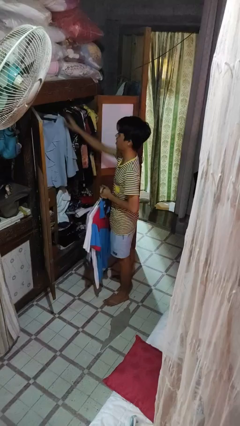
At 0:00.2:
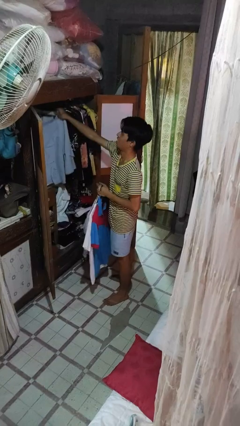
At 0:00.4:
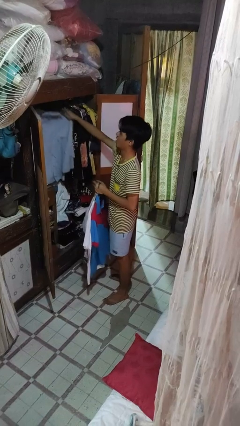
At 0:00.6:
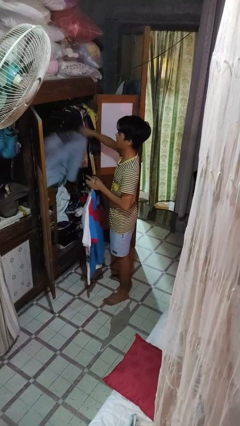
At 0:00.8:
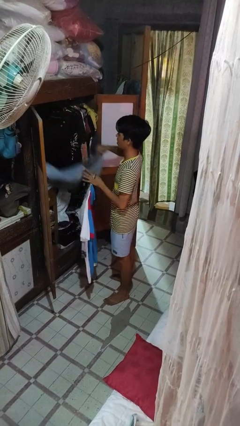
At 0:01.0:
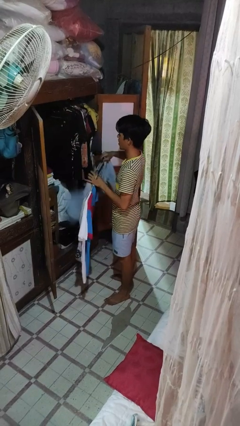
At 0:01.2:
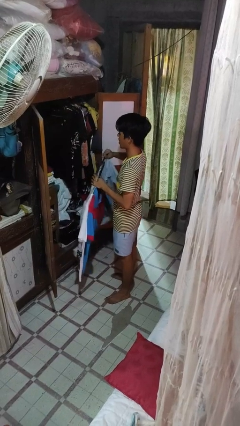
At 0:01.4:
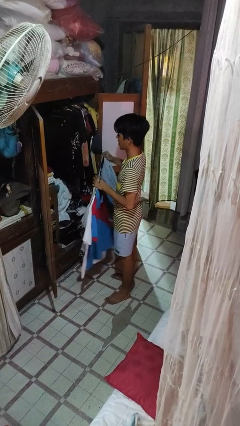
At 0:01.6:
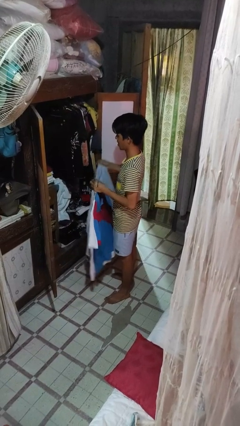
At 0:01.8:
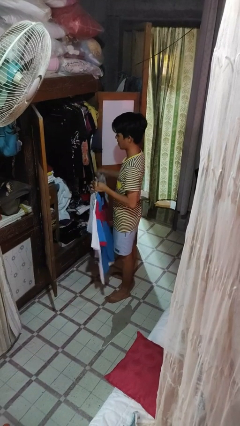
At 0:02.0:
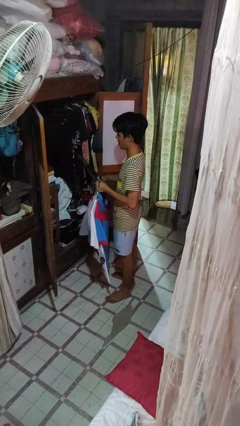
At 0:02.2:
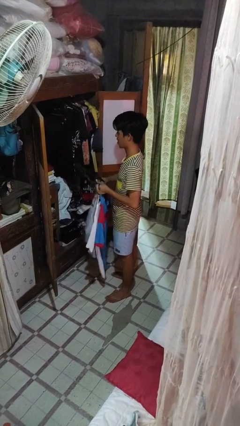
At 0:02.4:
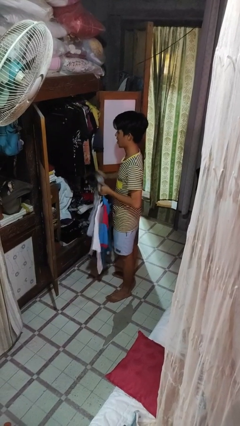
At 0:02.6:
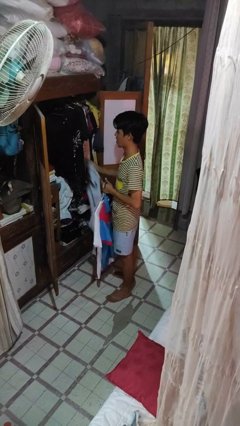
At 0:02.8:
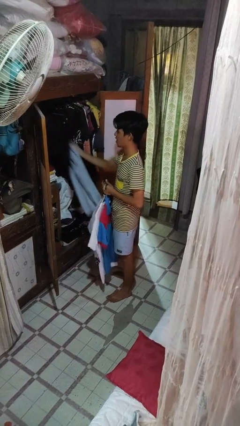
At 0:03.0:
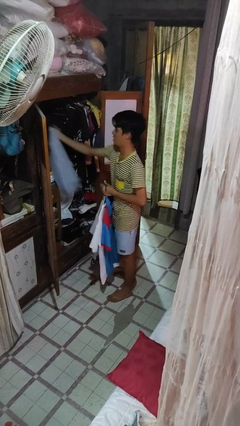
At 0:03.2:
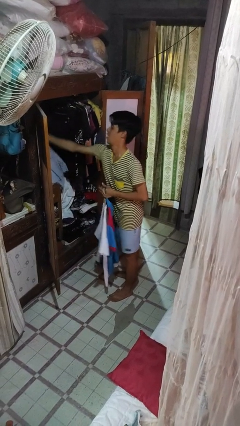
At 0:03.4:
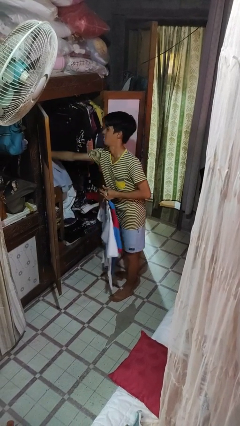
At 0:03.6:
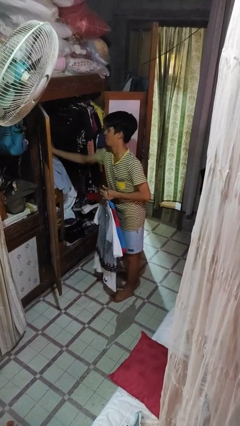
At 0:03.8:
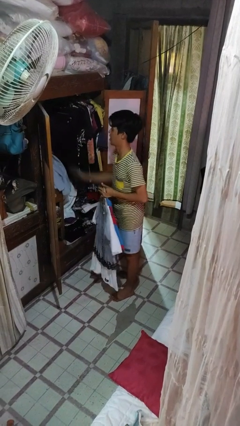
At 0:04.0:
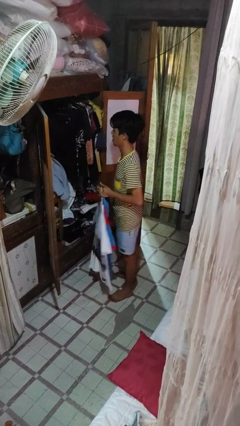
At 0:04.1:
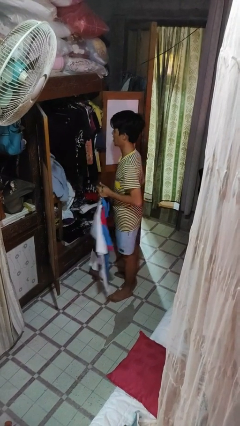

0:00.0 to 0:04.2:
person takes clothes from closet

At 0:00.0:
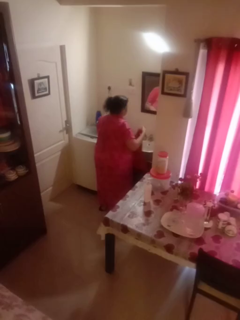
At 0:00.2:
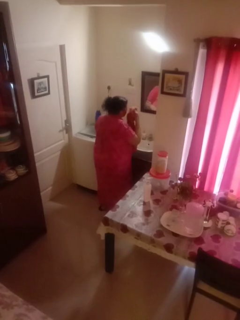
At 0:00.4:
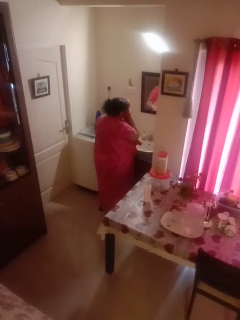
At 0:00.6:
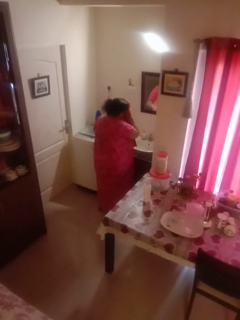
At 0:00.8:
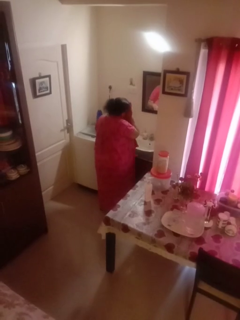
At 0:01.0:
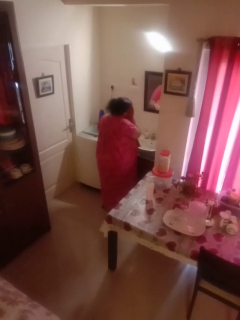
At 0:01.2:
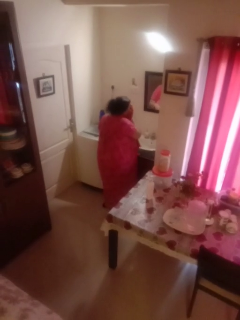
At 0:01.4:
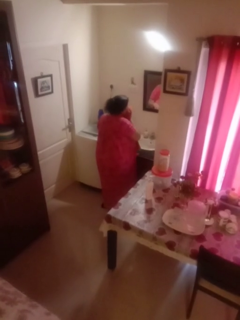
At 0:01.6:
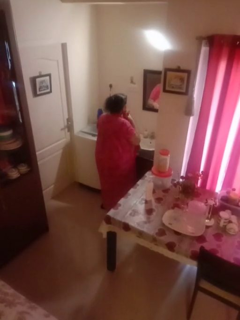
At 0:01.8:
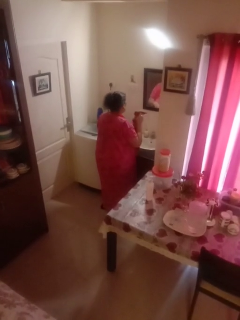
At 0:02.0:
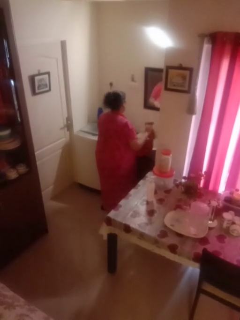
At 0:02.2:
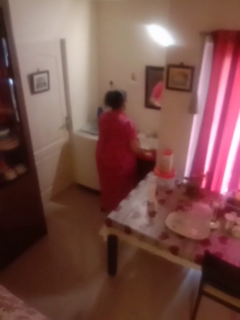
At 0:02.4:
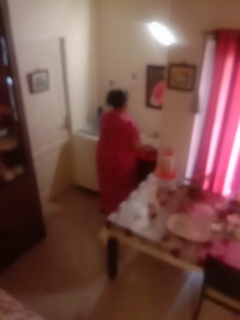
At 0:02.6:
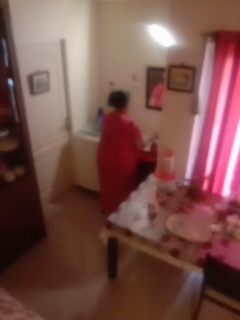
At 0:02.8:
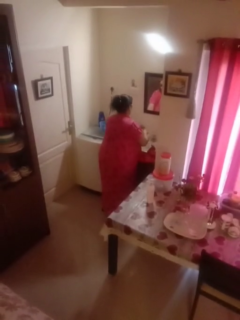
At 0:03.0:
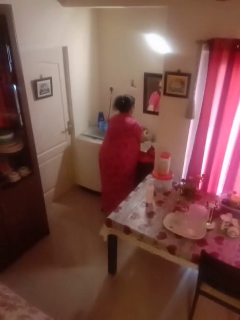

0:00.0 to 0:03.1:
person dries face with towel

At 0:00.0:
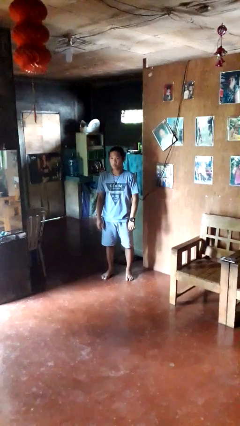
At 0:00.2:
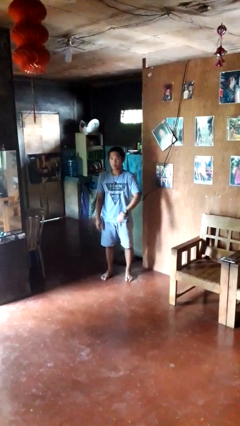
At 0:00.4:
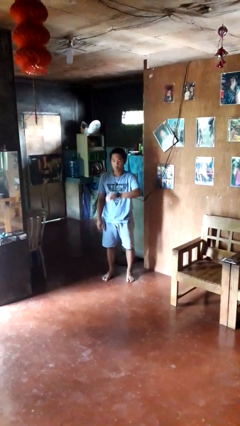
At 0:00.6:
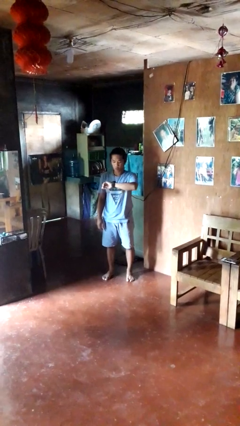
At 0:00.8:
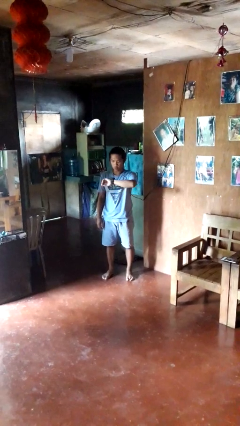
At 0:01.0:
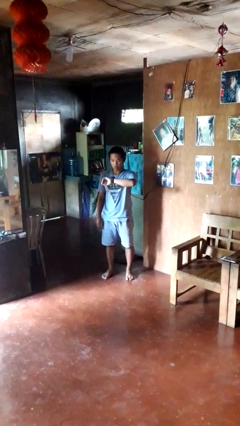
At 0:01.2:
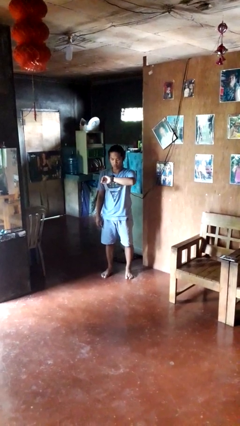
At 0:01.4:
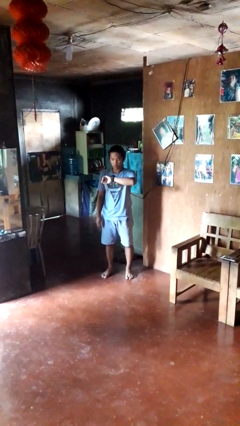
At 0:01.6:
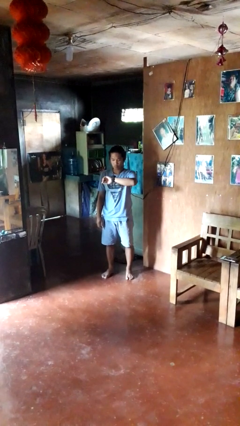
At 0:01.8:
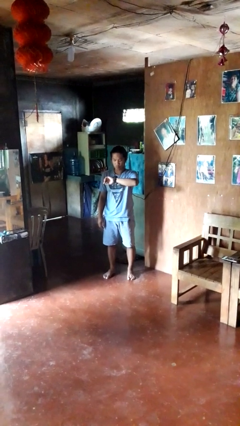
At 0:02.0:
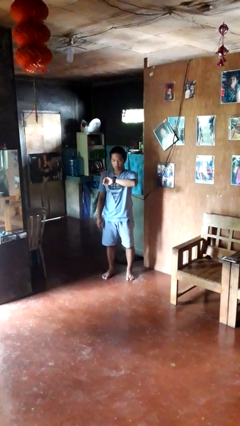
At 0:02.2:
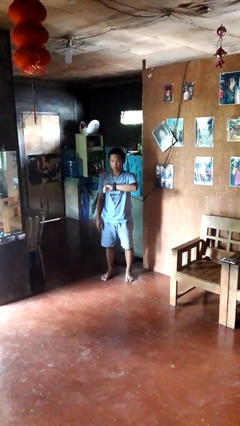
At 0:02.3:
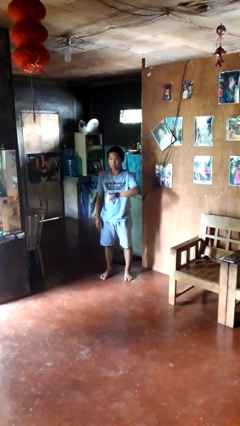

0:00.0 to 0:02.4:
person looks at wristwatch

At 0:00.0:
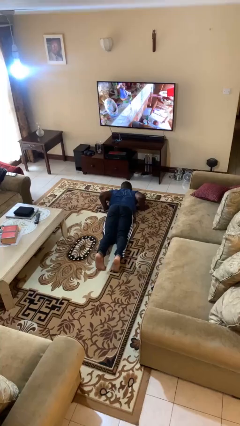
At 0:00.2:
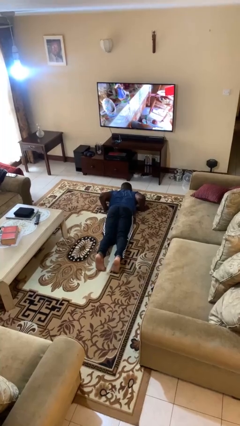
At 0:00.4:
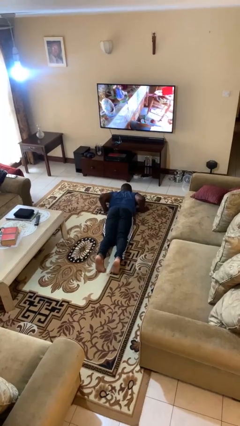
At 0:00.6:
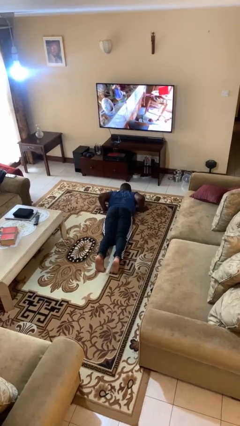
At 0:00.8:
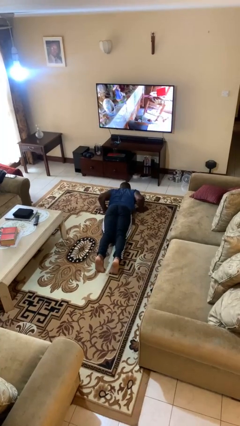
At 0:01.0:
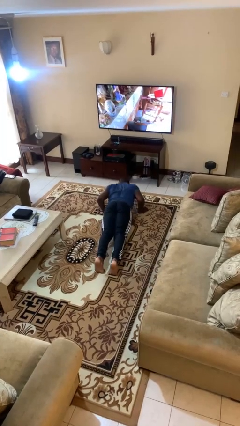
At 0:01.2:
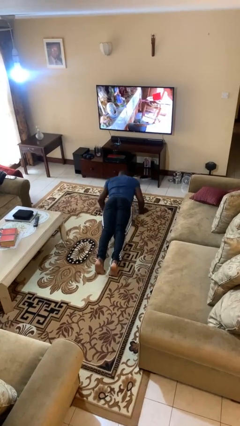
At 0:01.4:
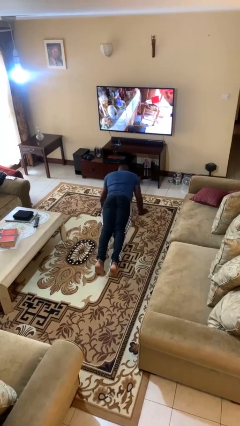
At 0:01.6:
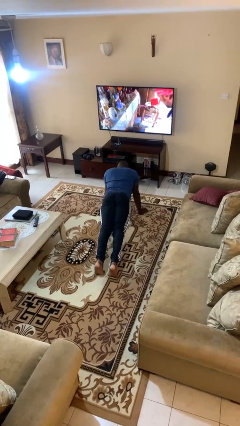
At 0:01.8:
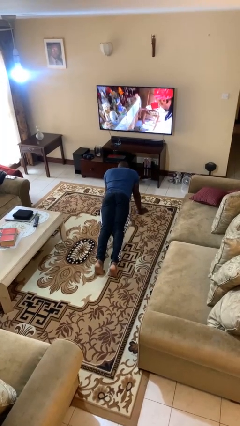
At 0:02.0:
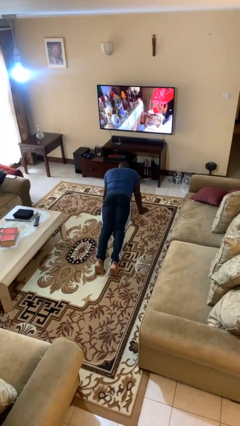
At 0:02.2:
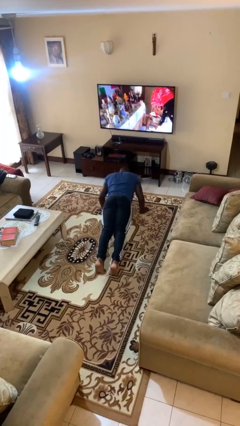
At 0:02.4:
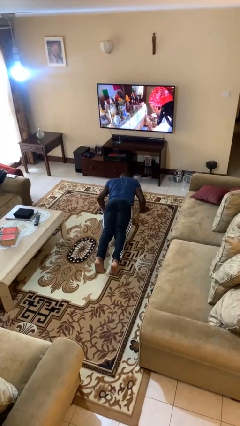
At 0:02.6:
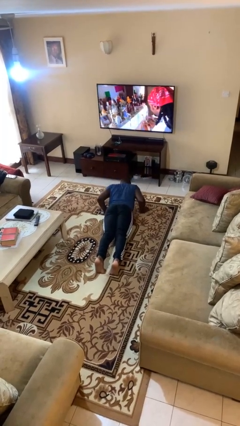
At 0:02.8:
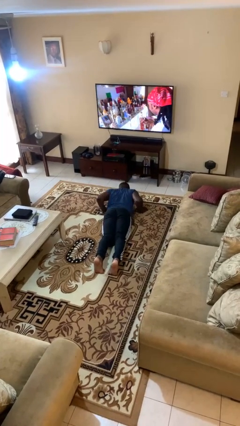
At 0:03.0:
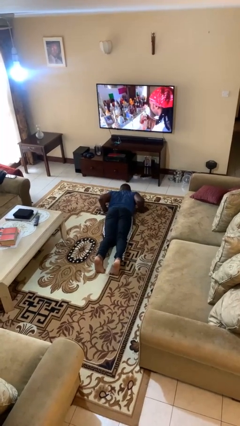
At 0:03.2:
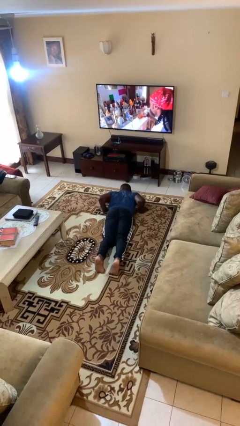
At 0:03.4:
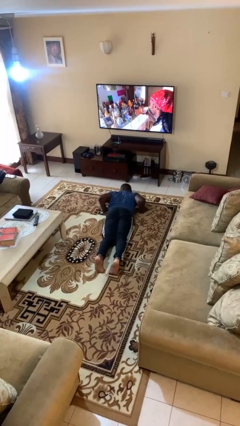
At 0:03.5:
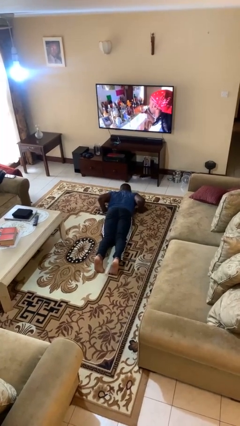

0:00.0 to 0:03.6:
person exercises with pushup

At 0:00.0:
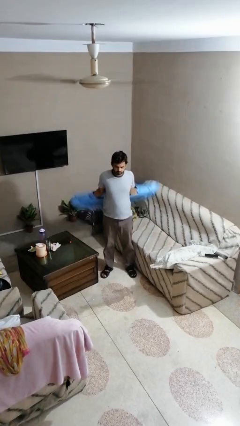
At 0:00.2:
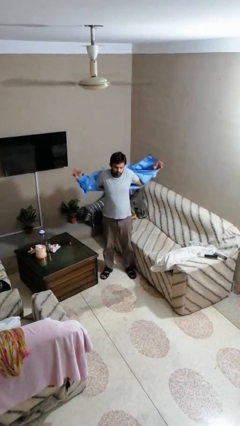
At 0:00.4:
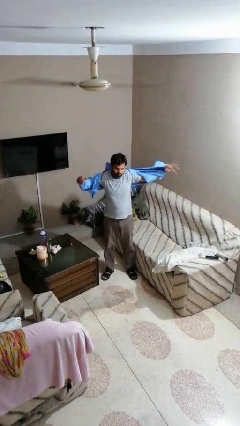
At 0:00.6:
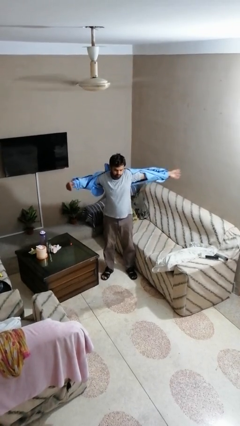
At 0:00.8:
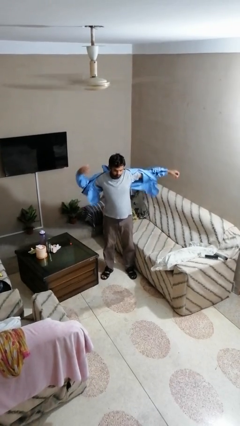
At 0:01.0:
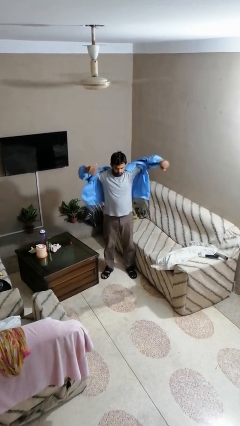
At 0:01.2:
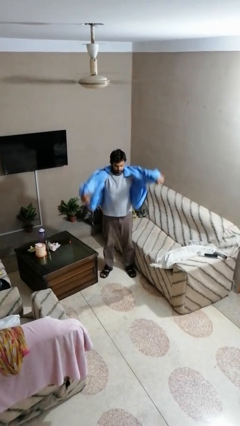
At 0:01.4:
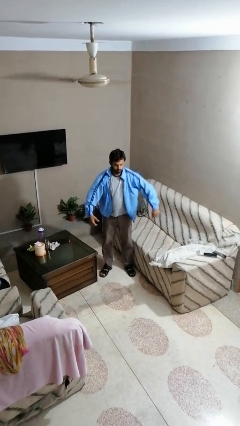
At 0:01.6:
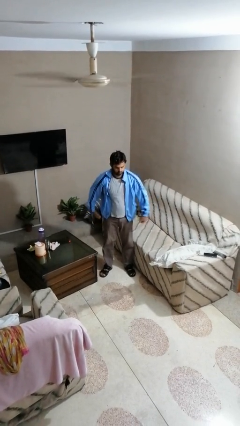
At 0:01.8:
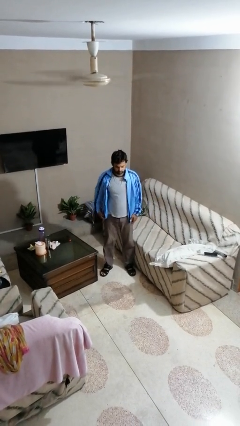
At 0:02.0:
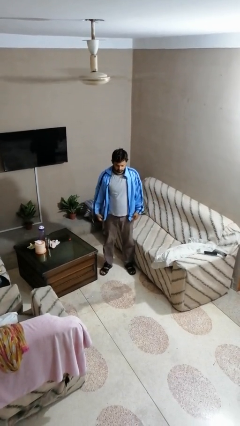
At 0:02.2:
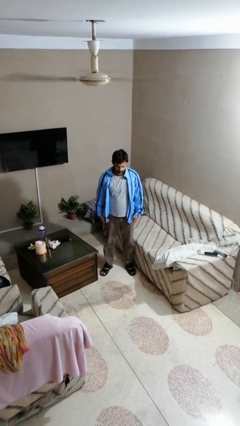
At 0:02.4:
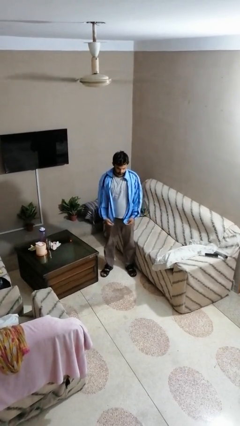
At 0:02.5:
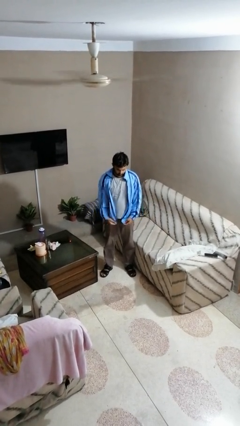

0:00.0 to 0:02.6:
person puts on jacket

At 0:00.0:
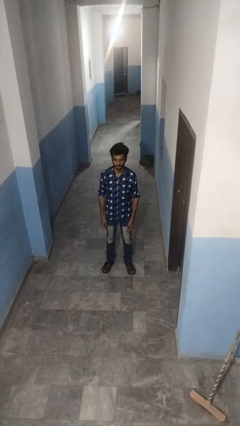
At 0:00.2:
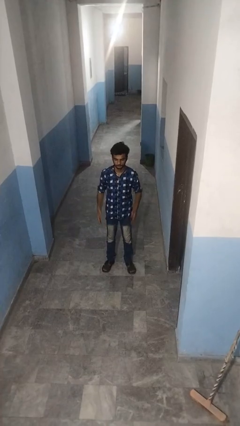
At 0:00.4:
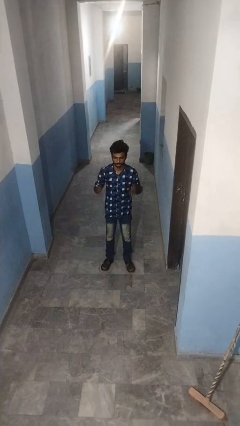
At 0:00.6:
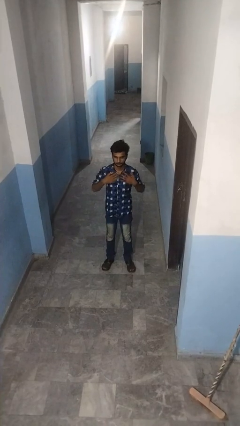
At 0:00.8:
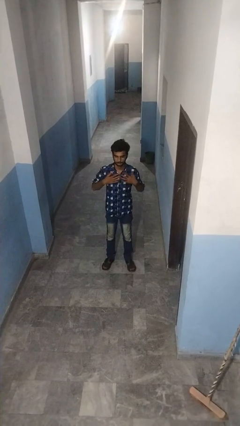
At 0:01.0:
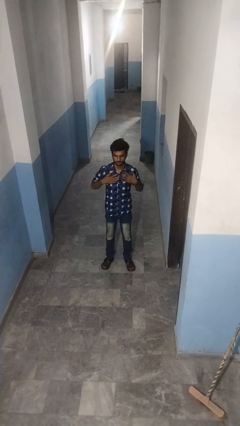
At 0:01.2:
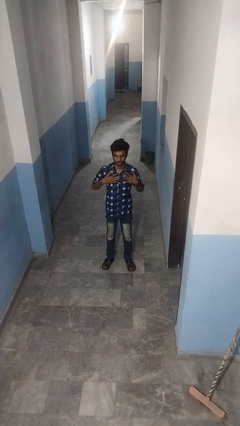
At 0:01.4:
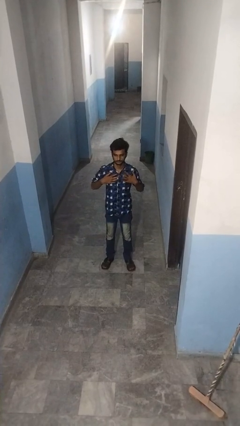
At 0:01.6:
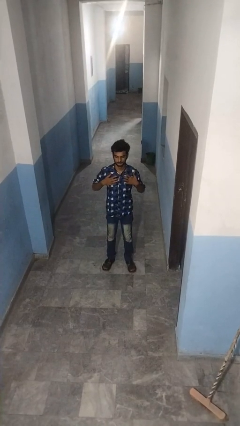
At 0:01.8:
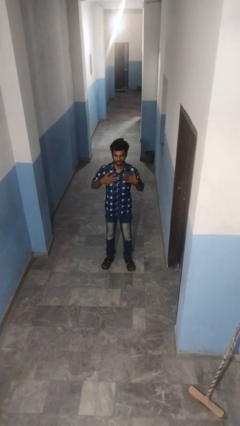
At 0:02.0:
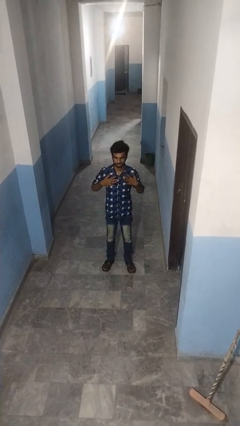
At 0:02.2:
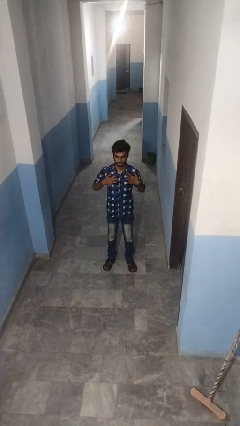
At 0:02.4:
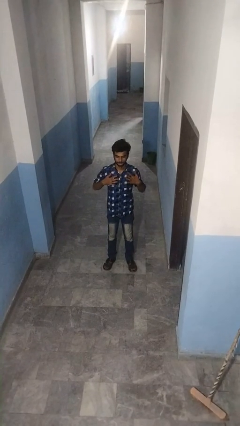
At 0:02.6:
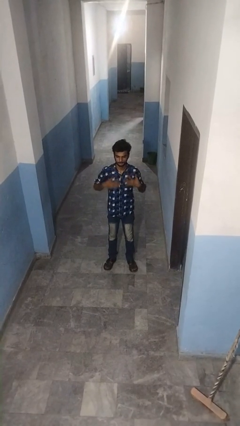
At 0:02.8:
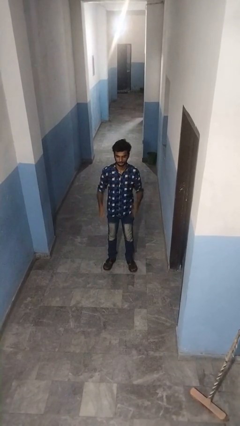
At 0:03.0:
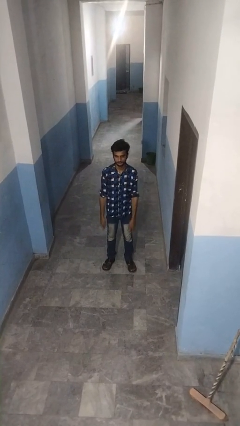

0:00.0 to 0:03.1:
person drums on chest
